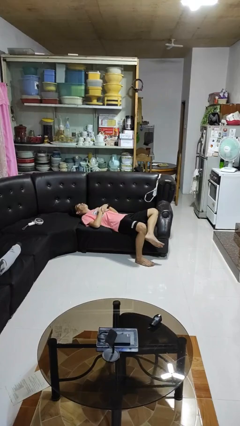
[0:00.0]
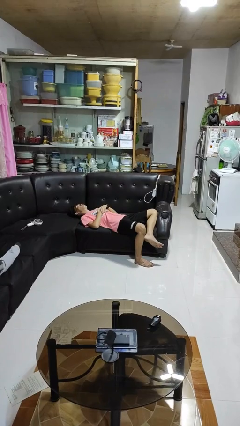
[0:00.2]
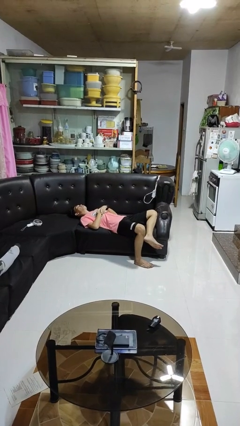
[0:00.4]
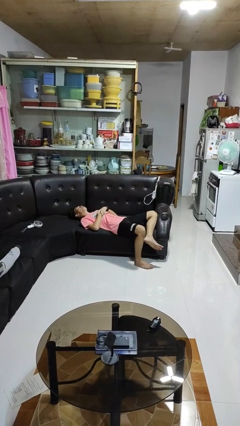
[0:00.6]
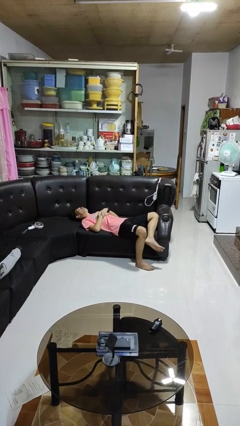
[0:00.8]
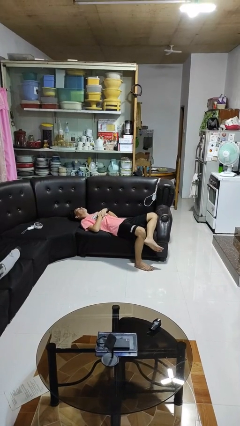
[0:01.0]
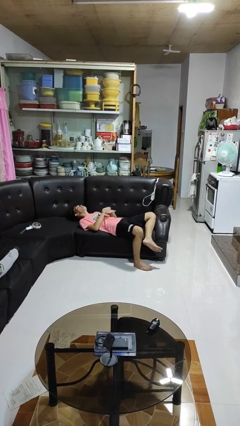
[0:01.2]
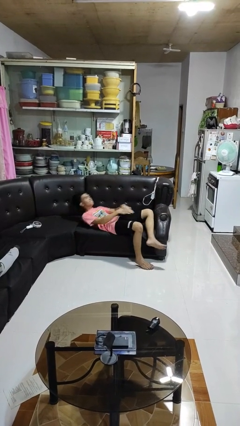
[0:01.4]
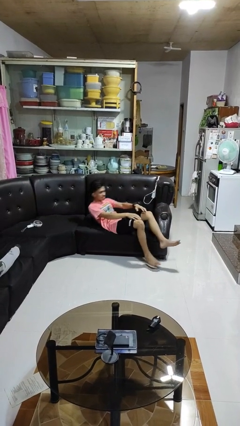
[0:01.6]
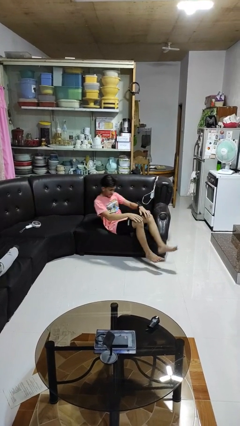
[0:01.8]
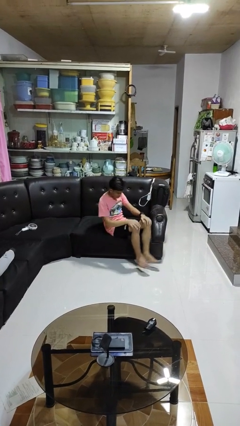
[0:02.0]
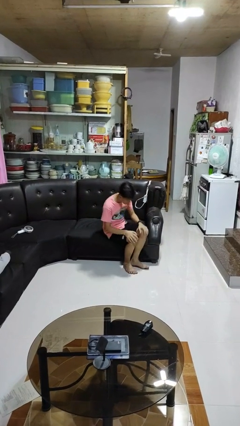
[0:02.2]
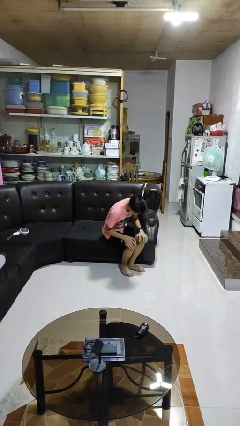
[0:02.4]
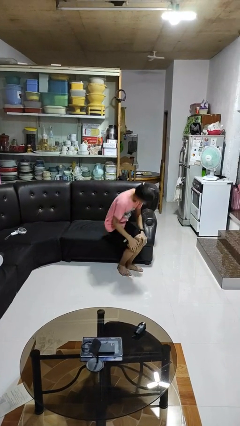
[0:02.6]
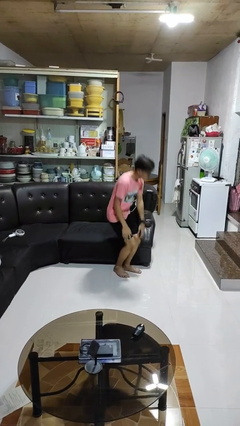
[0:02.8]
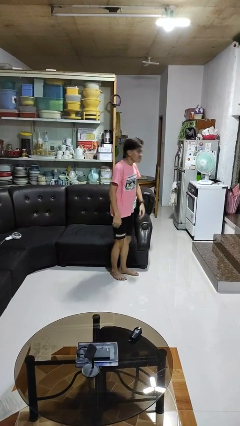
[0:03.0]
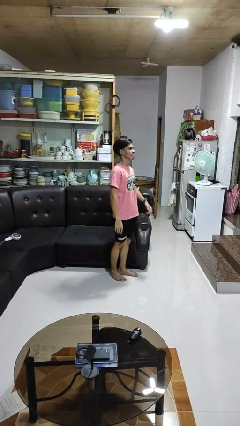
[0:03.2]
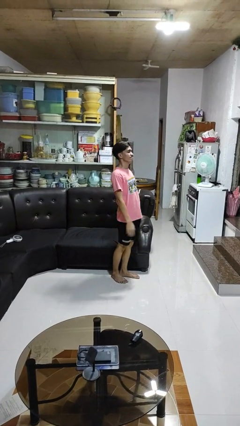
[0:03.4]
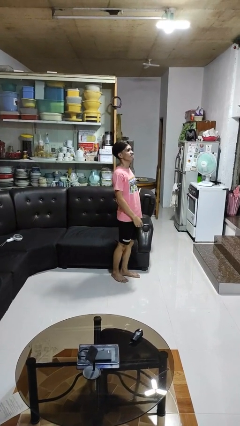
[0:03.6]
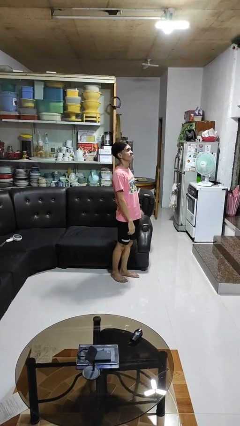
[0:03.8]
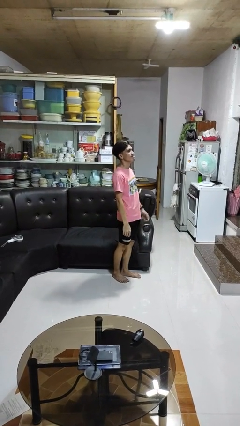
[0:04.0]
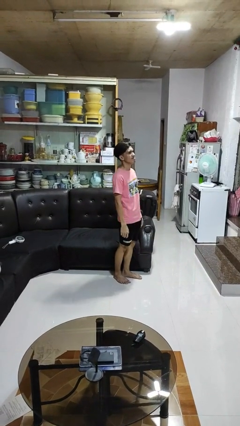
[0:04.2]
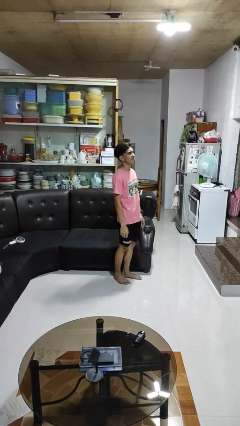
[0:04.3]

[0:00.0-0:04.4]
person stands up

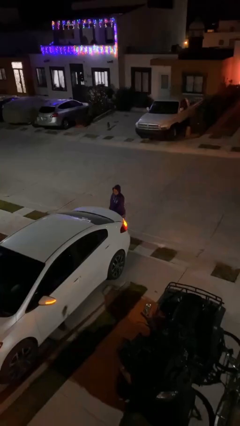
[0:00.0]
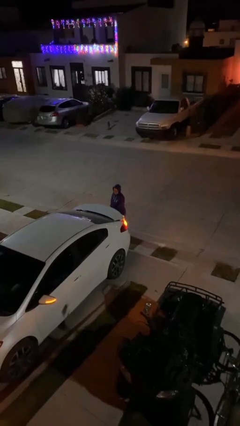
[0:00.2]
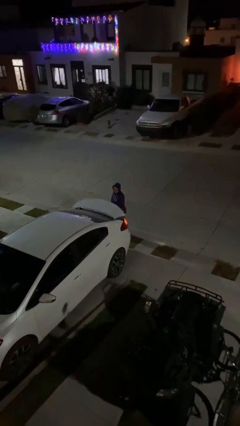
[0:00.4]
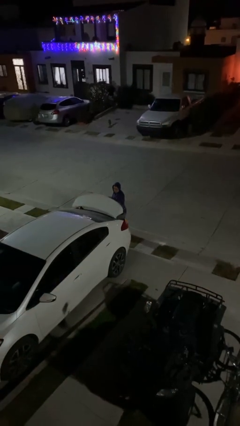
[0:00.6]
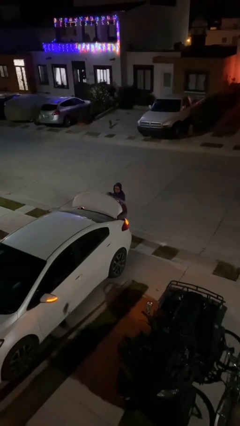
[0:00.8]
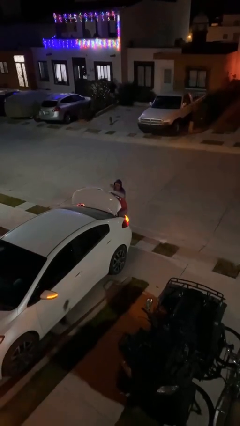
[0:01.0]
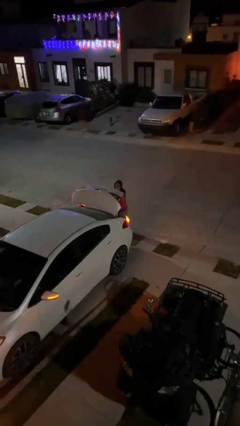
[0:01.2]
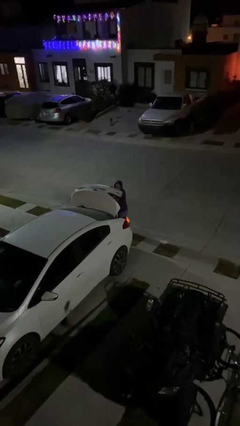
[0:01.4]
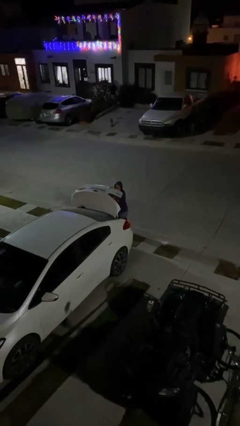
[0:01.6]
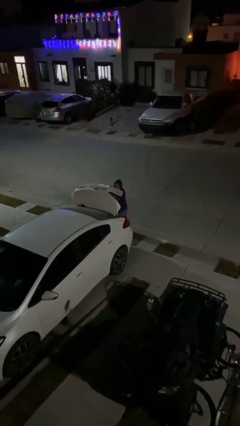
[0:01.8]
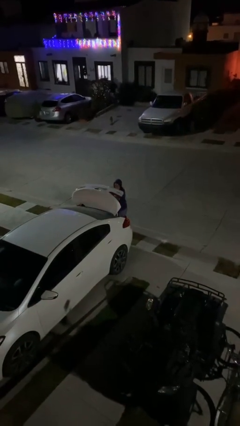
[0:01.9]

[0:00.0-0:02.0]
person opens car trunk

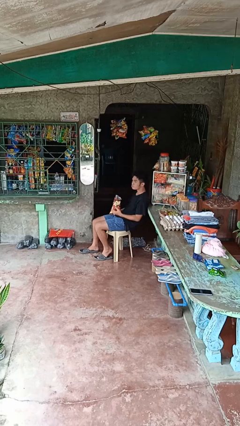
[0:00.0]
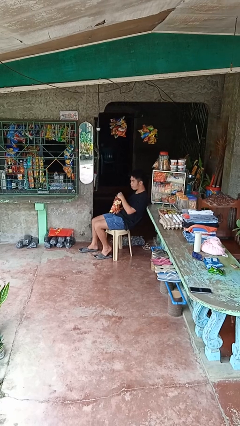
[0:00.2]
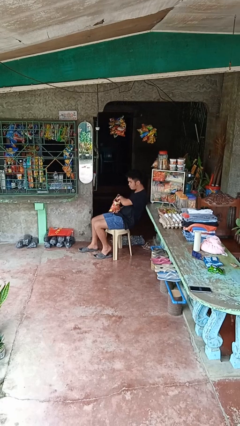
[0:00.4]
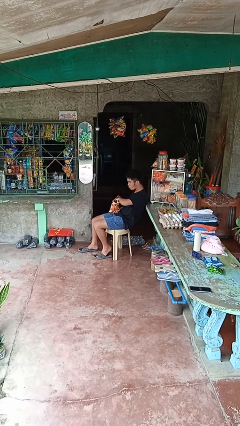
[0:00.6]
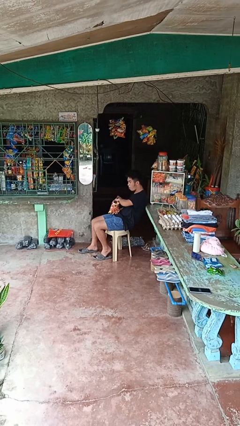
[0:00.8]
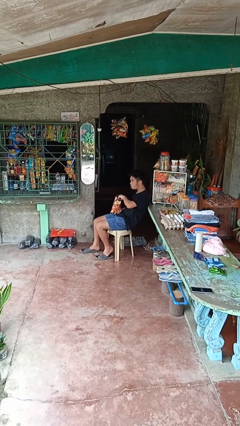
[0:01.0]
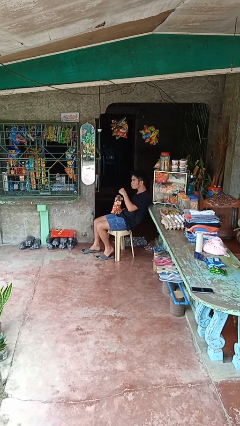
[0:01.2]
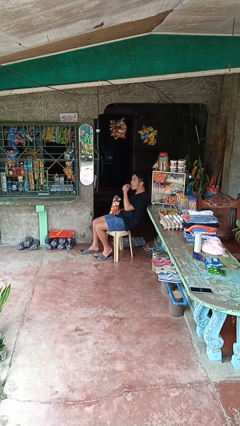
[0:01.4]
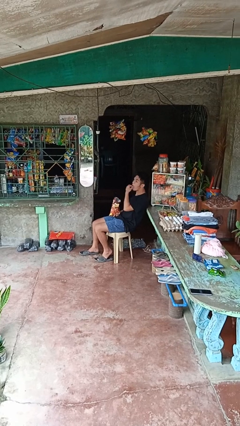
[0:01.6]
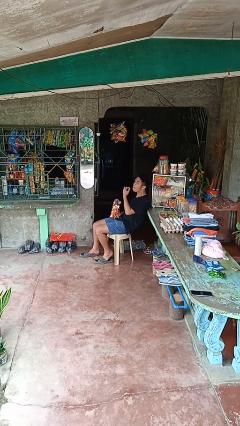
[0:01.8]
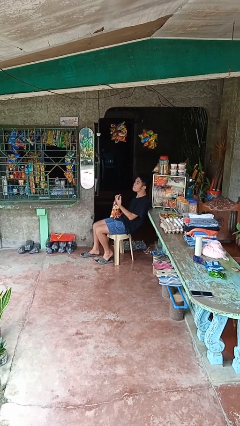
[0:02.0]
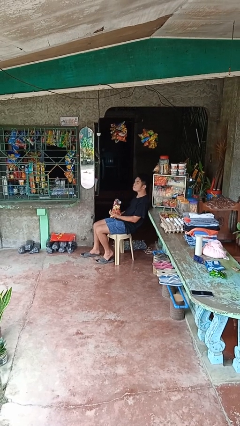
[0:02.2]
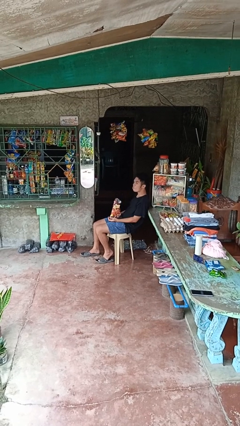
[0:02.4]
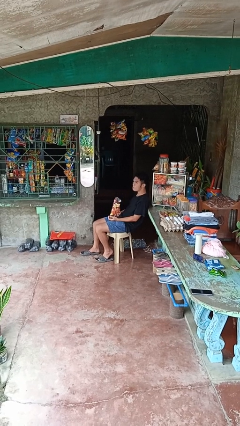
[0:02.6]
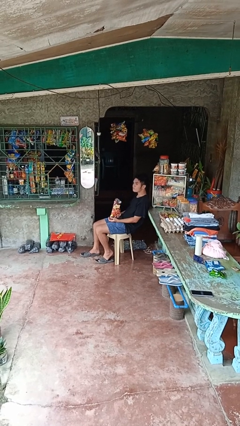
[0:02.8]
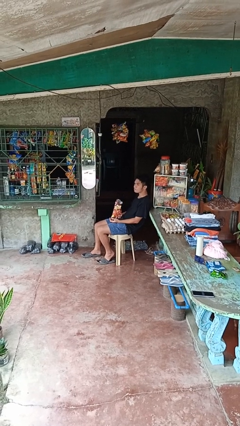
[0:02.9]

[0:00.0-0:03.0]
person eats snack from bag

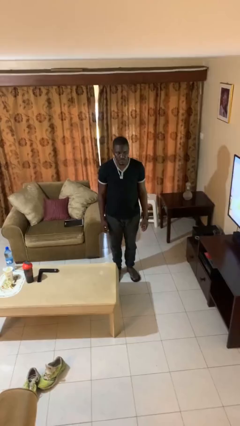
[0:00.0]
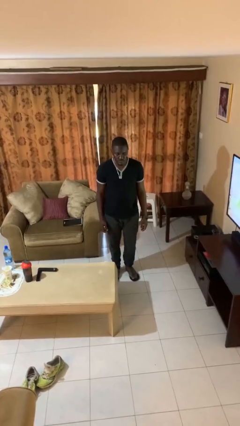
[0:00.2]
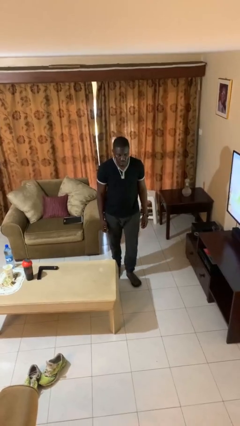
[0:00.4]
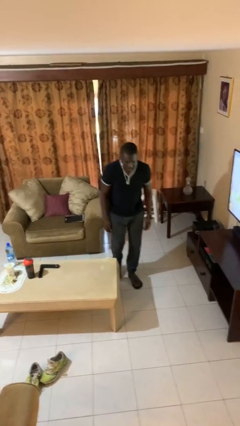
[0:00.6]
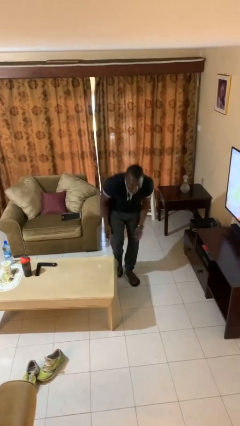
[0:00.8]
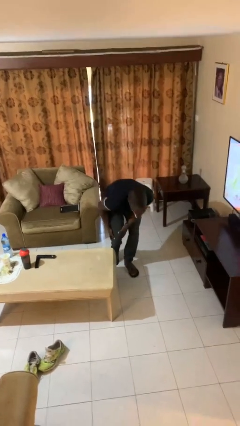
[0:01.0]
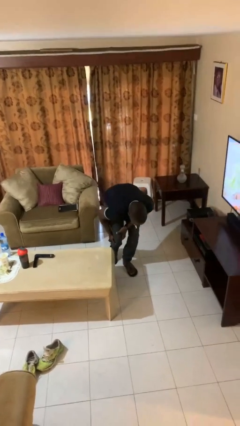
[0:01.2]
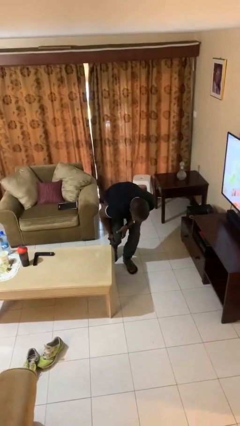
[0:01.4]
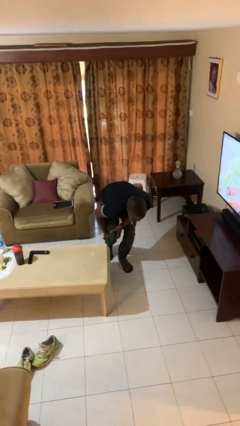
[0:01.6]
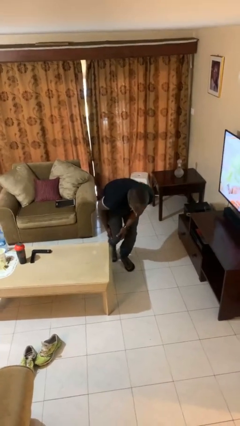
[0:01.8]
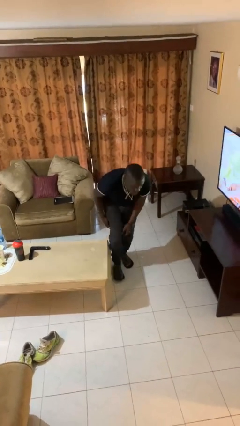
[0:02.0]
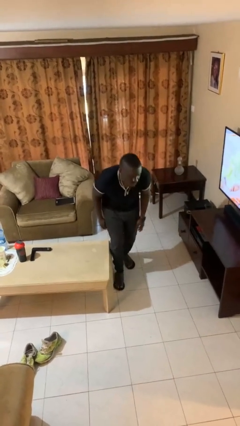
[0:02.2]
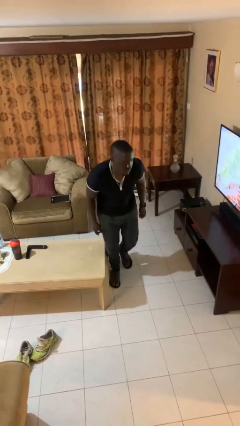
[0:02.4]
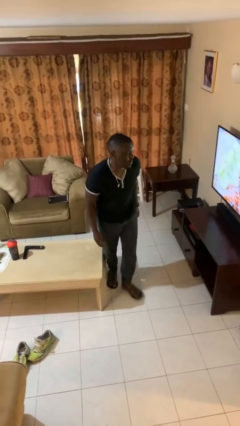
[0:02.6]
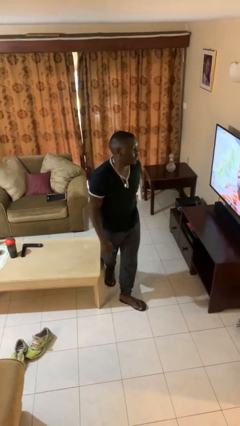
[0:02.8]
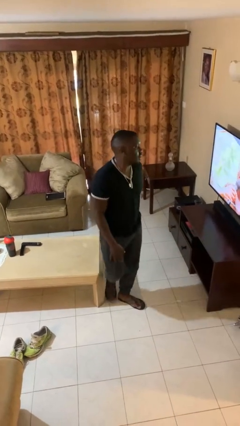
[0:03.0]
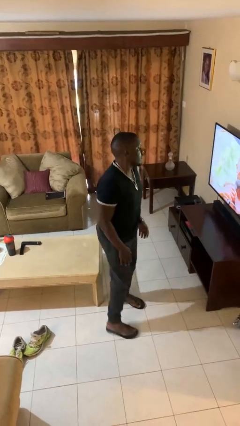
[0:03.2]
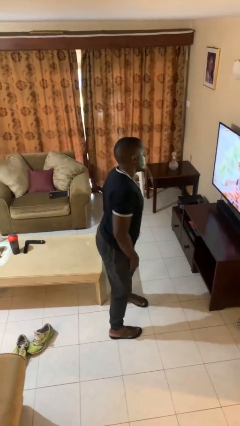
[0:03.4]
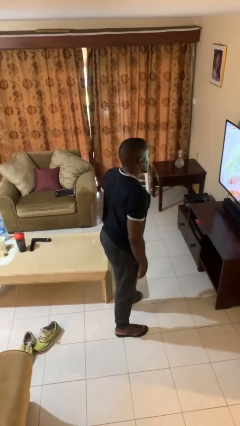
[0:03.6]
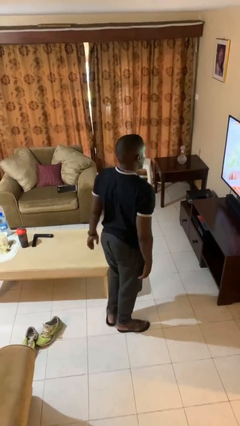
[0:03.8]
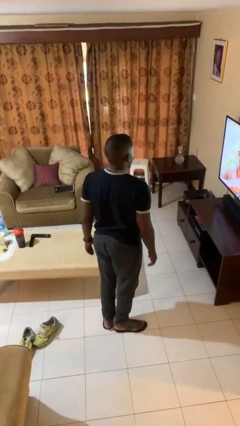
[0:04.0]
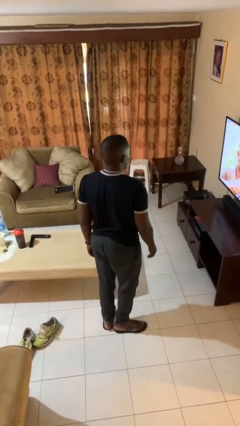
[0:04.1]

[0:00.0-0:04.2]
person bumps into table

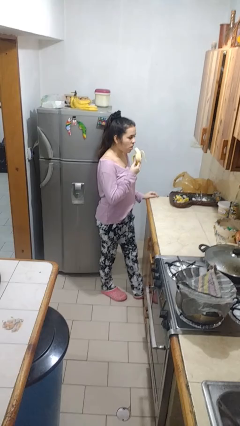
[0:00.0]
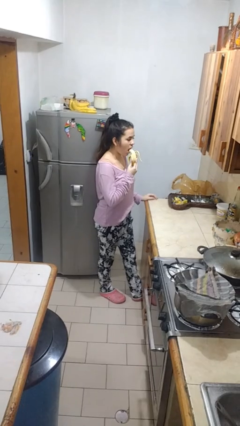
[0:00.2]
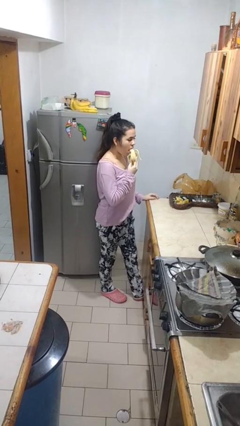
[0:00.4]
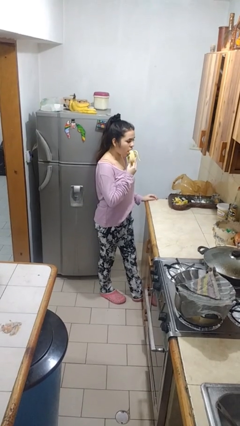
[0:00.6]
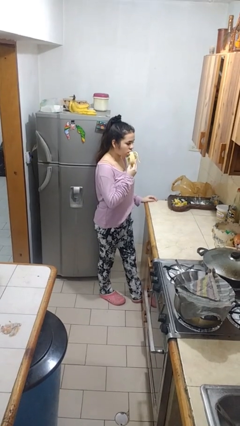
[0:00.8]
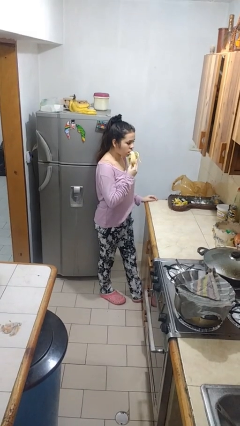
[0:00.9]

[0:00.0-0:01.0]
person eats banana

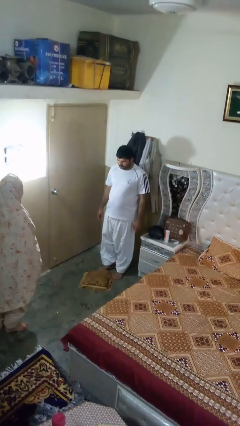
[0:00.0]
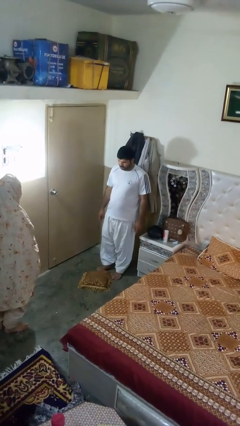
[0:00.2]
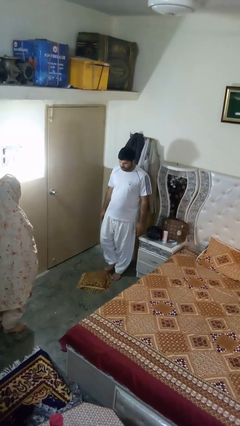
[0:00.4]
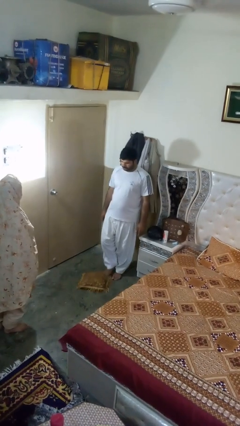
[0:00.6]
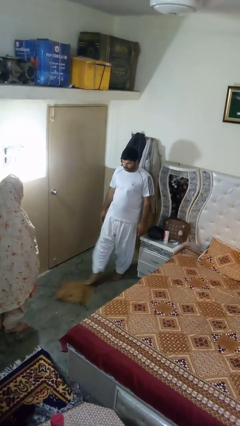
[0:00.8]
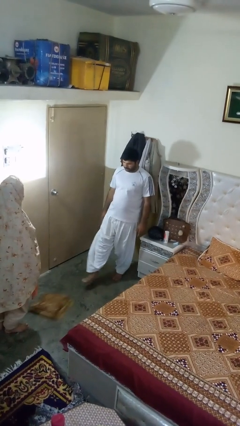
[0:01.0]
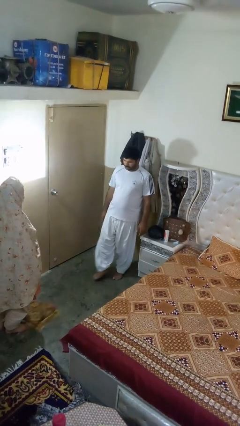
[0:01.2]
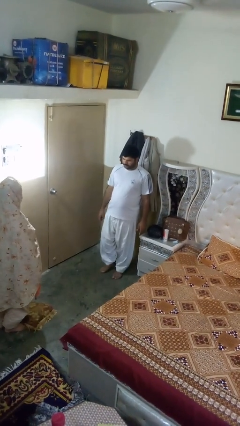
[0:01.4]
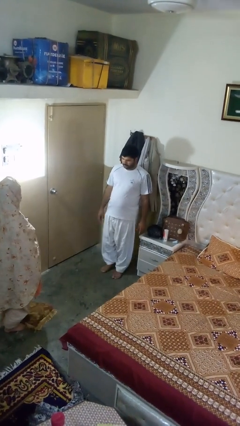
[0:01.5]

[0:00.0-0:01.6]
person kicks object to person

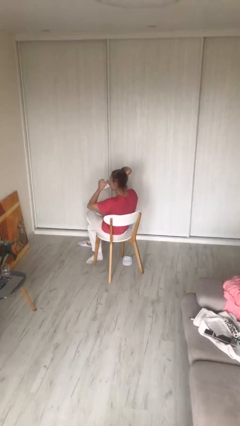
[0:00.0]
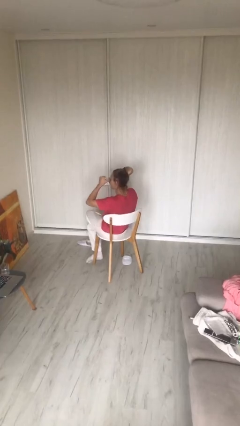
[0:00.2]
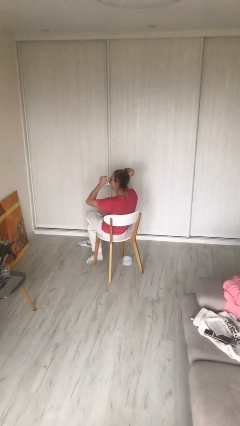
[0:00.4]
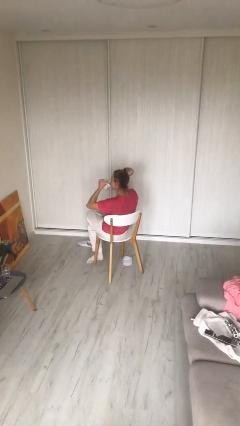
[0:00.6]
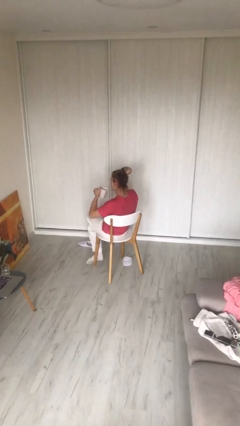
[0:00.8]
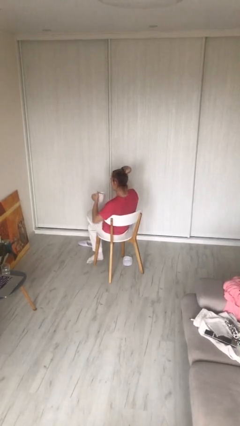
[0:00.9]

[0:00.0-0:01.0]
person drinks from mug
